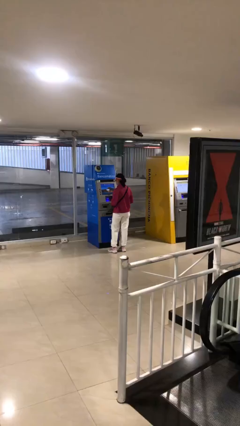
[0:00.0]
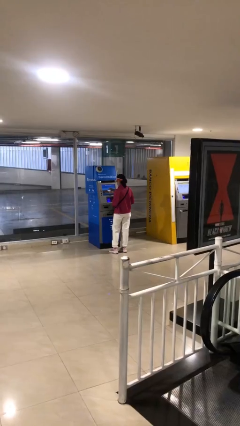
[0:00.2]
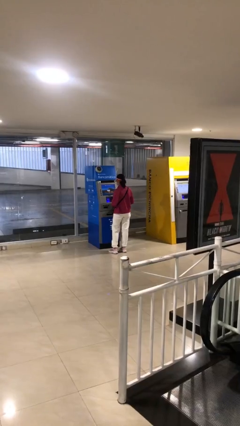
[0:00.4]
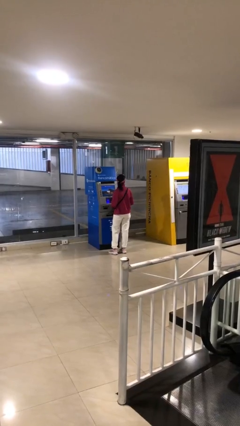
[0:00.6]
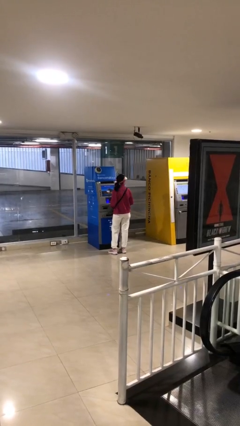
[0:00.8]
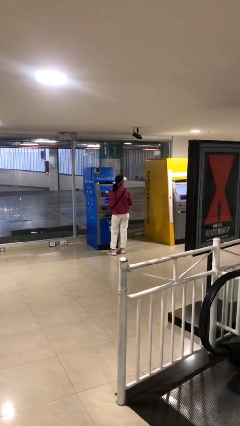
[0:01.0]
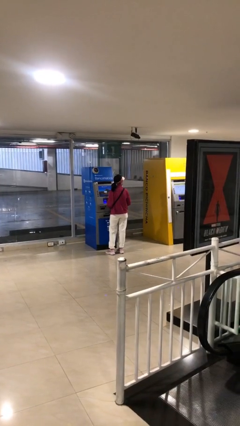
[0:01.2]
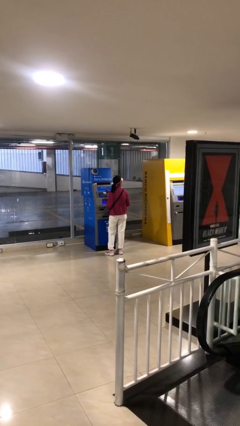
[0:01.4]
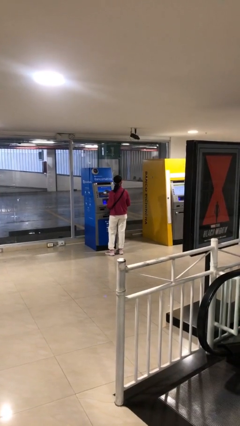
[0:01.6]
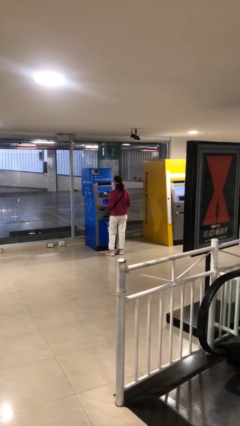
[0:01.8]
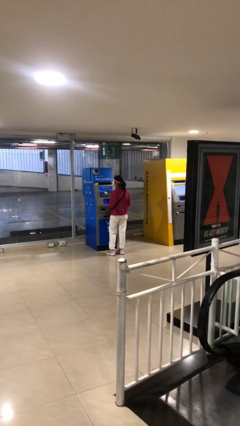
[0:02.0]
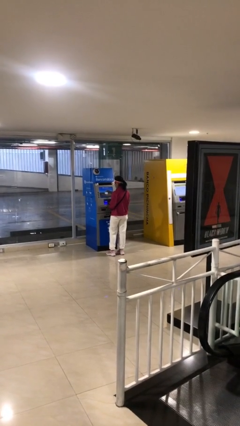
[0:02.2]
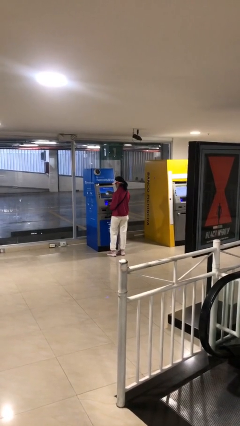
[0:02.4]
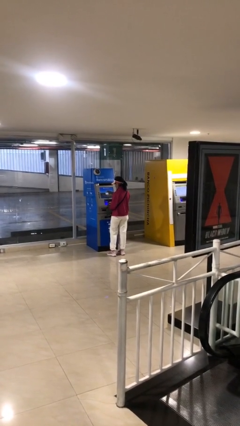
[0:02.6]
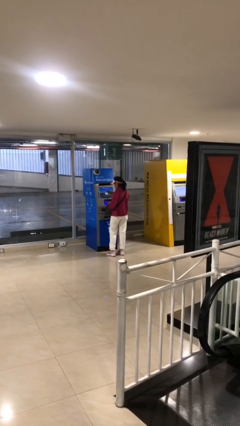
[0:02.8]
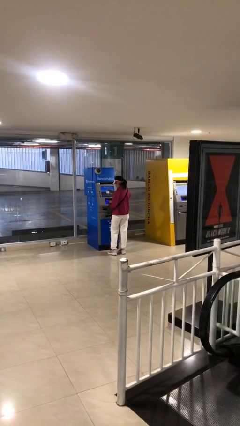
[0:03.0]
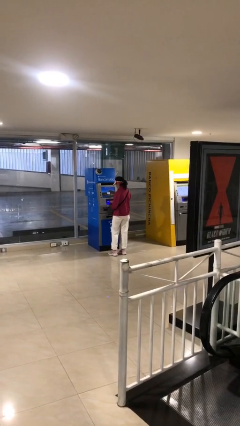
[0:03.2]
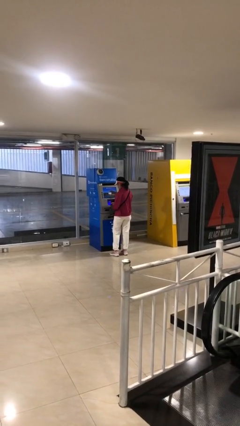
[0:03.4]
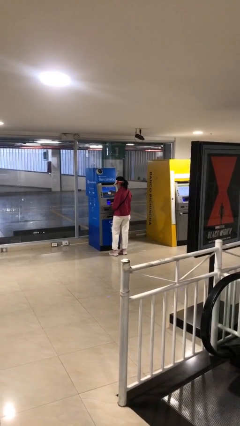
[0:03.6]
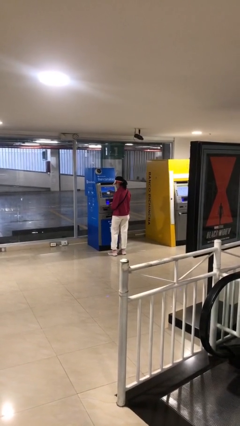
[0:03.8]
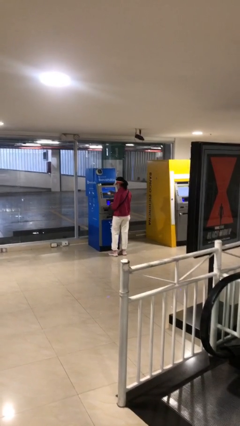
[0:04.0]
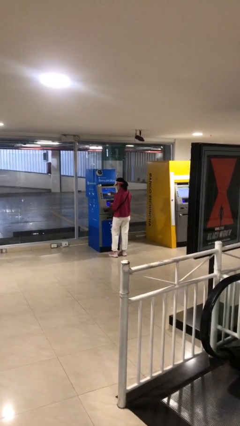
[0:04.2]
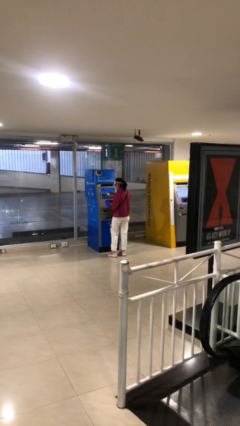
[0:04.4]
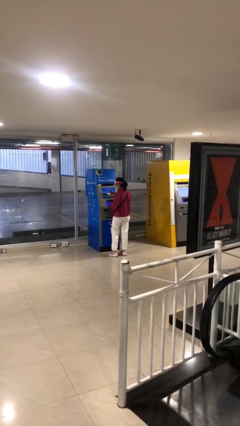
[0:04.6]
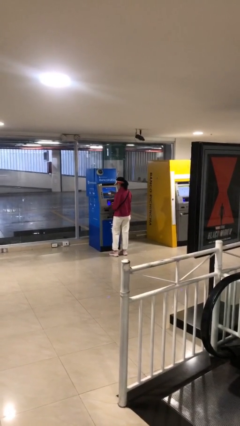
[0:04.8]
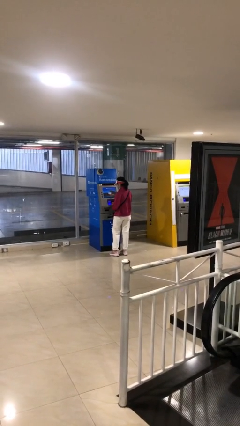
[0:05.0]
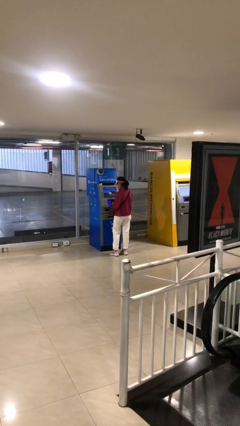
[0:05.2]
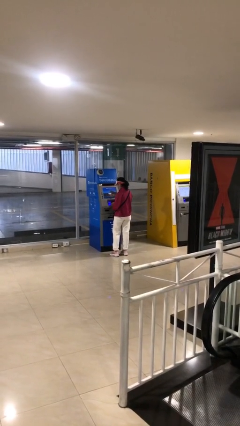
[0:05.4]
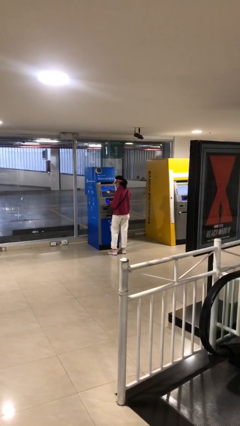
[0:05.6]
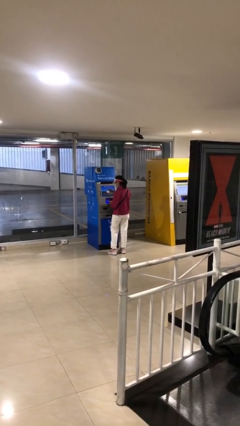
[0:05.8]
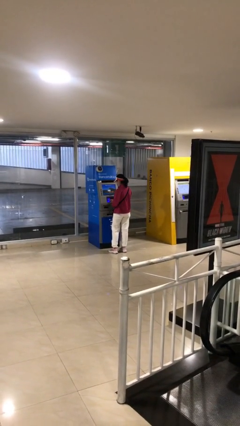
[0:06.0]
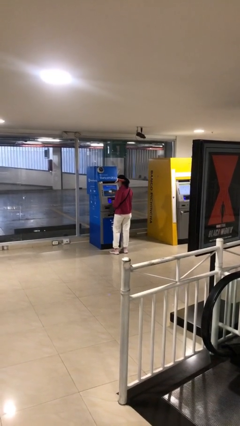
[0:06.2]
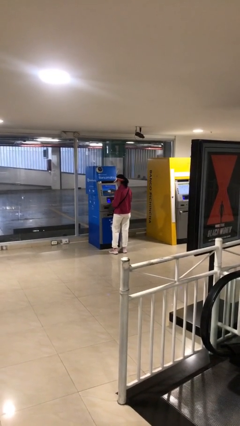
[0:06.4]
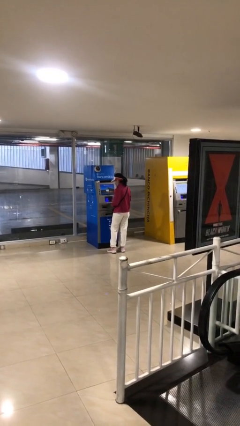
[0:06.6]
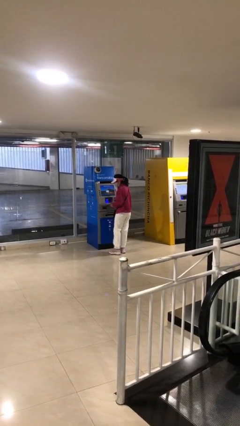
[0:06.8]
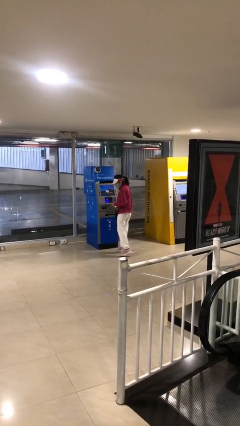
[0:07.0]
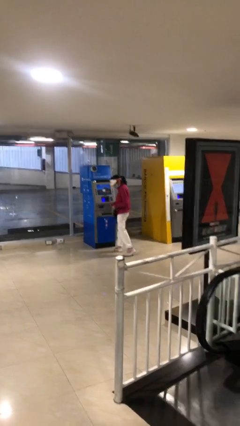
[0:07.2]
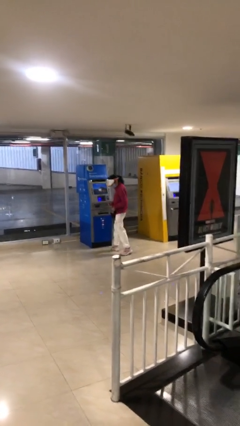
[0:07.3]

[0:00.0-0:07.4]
person purchases from machine

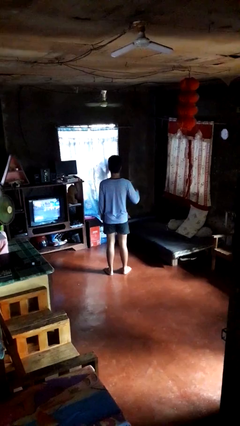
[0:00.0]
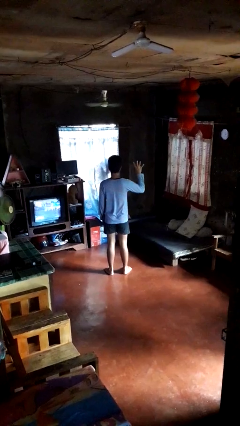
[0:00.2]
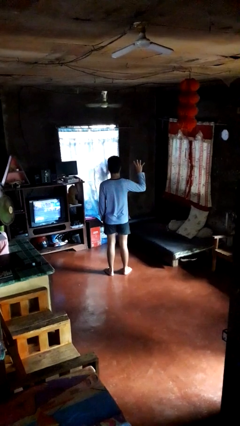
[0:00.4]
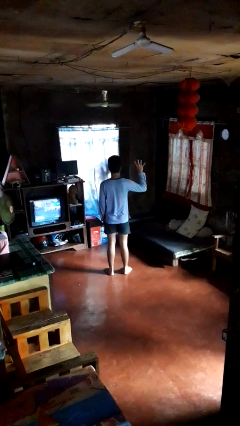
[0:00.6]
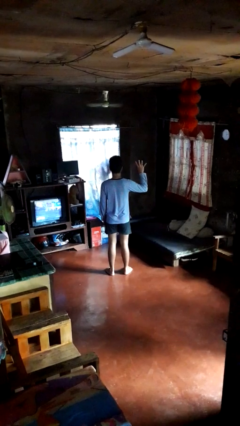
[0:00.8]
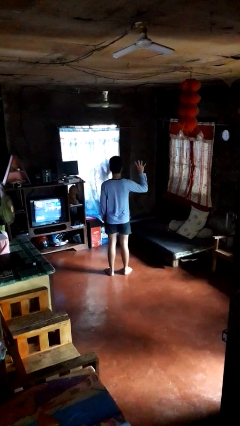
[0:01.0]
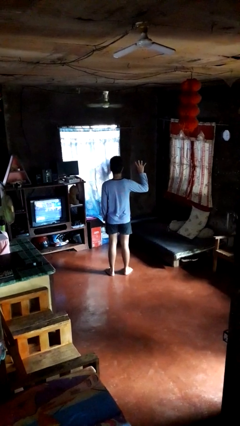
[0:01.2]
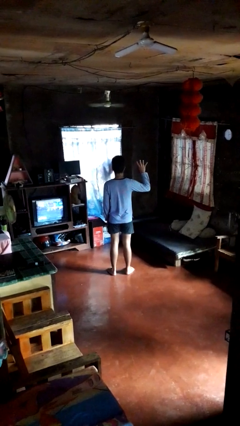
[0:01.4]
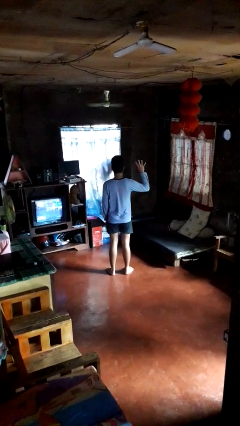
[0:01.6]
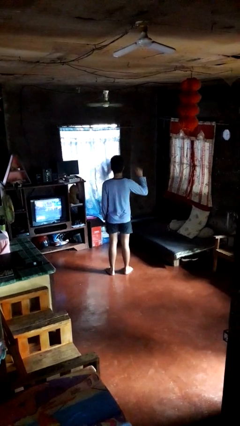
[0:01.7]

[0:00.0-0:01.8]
person gestures number four

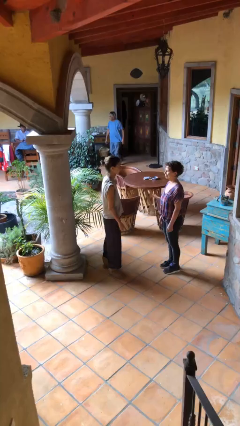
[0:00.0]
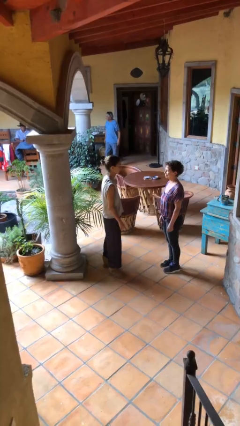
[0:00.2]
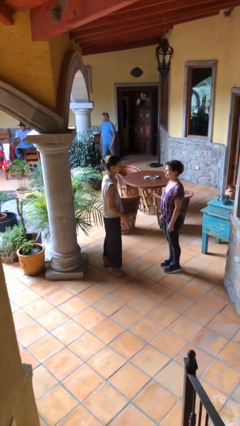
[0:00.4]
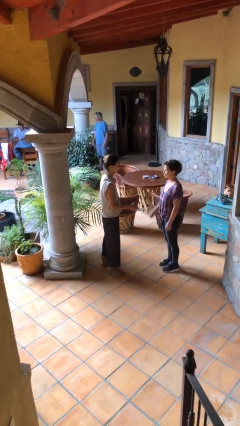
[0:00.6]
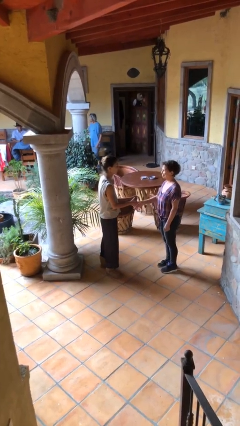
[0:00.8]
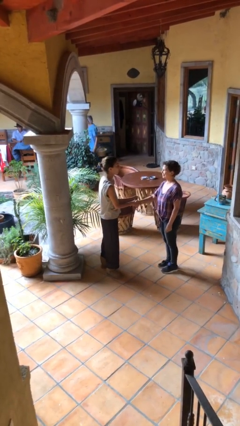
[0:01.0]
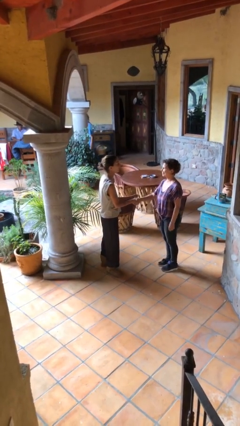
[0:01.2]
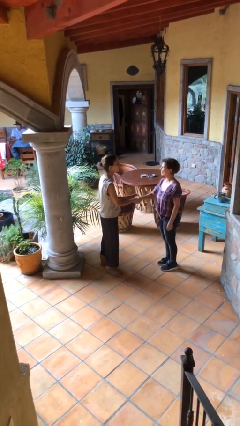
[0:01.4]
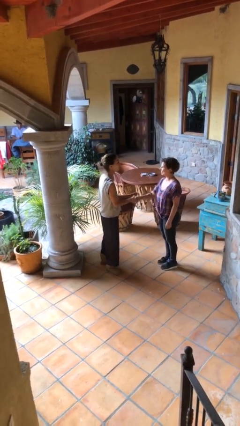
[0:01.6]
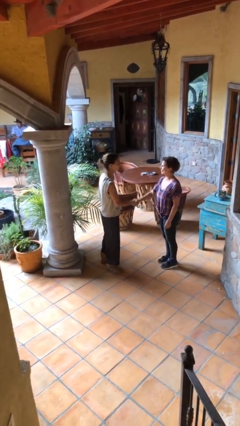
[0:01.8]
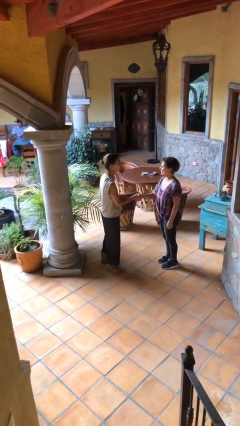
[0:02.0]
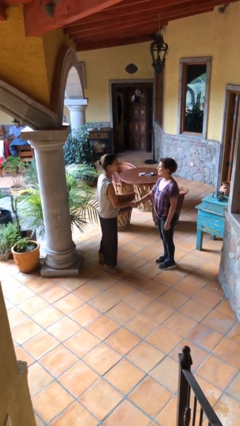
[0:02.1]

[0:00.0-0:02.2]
person shakes hand

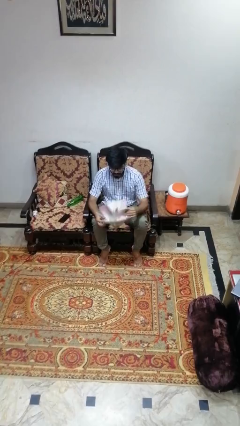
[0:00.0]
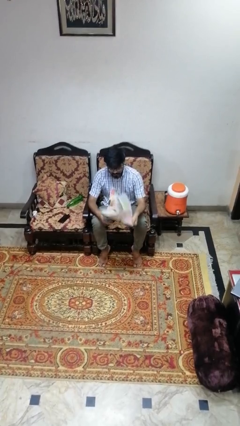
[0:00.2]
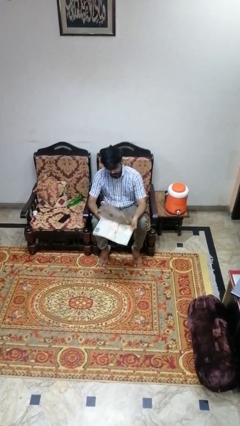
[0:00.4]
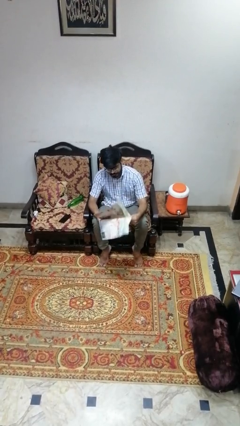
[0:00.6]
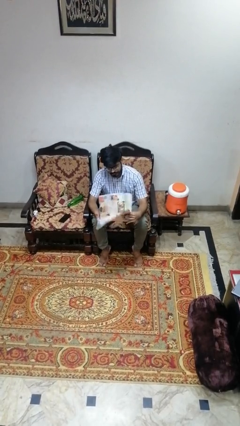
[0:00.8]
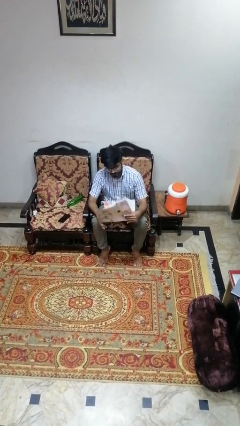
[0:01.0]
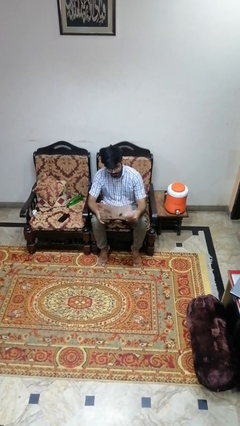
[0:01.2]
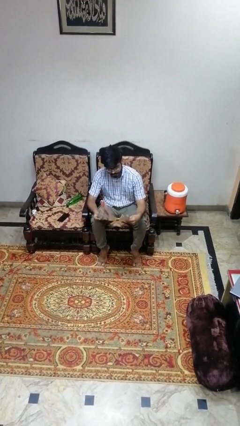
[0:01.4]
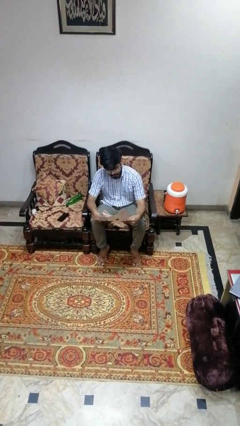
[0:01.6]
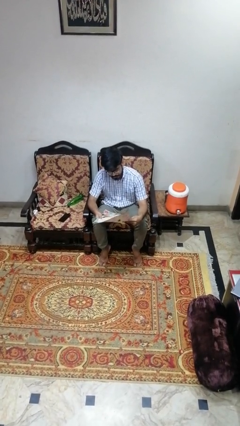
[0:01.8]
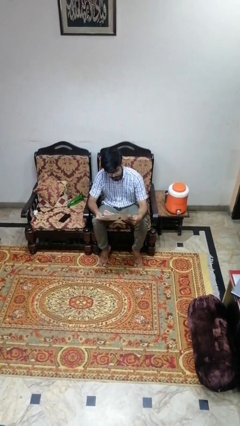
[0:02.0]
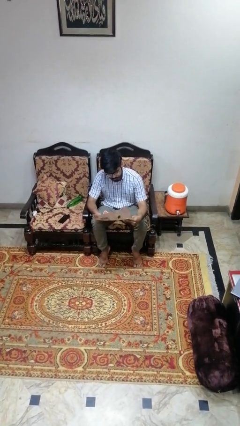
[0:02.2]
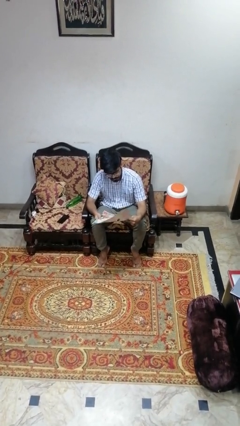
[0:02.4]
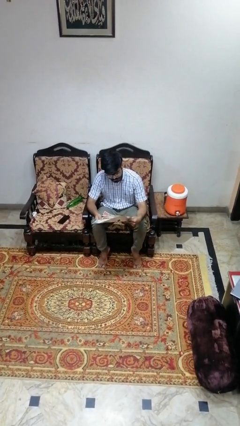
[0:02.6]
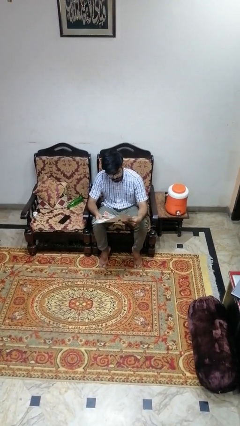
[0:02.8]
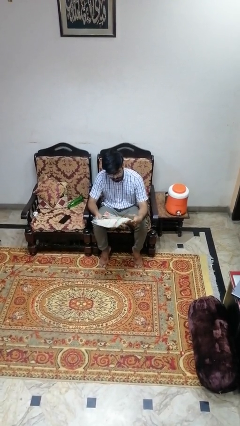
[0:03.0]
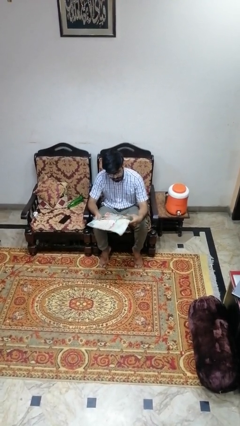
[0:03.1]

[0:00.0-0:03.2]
person reads newspaper

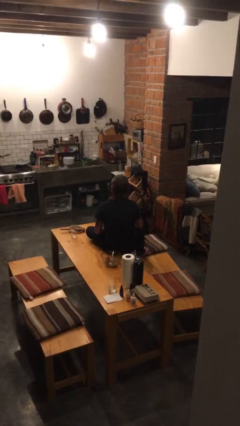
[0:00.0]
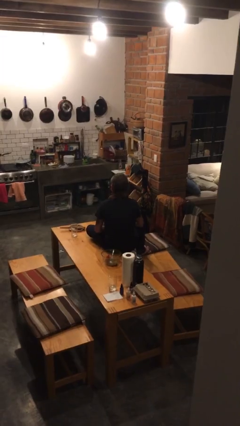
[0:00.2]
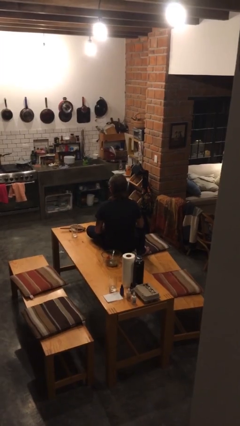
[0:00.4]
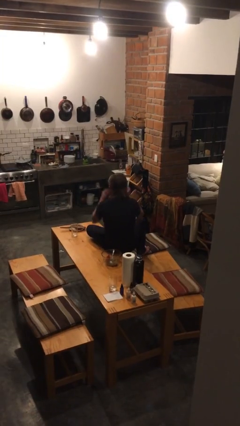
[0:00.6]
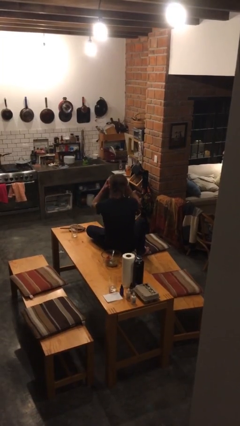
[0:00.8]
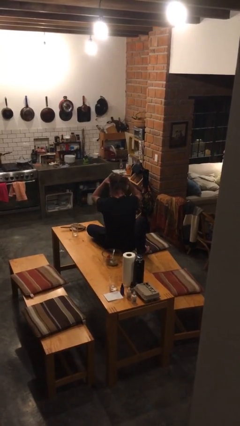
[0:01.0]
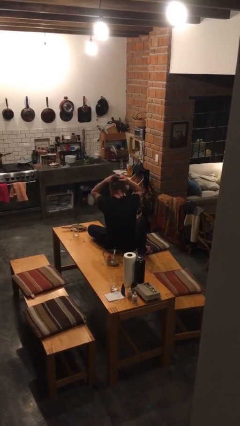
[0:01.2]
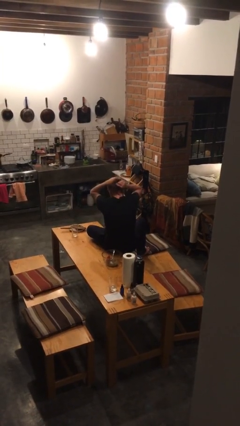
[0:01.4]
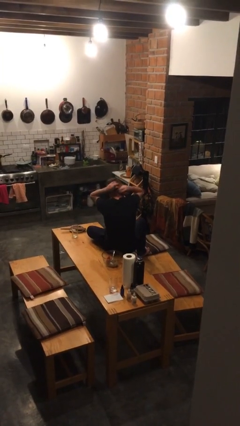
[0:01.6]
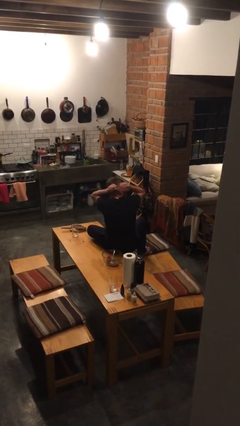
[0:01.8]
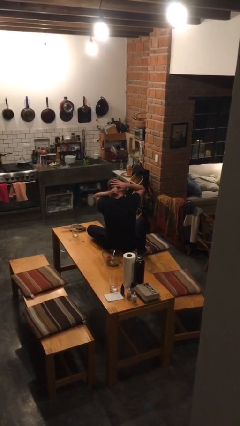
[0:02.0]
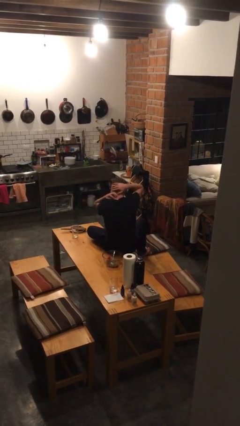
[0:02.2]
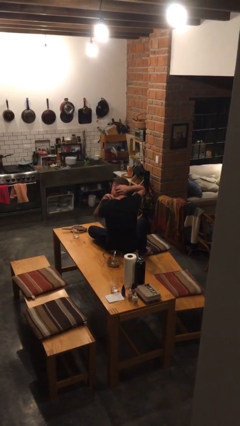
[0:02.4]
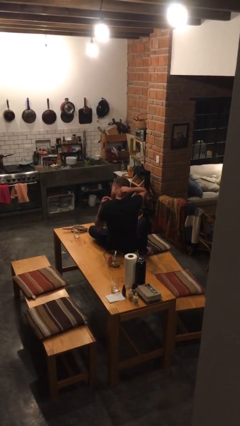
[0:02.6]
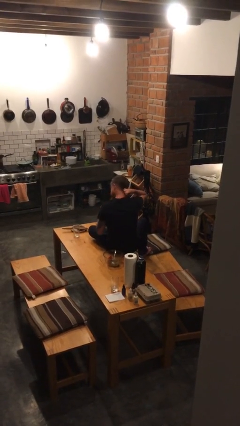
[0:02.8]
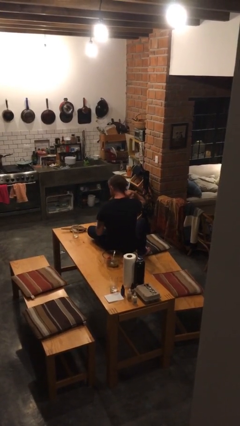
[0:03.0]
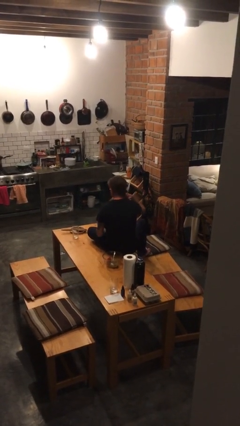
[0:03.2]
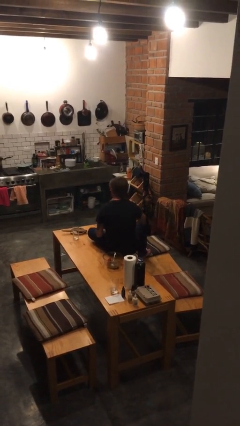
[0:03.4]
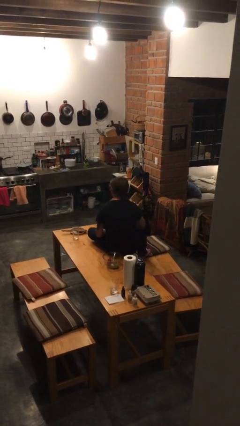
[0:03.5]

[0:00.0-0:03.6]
person strokes hair
